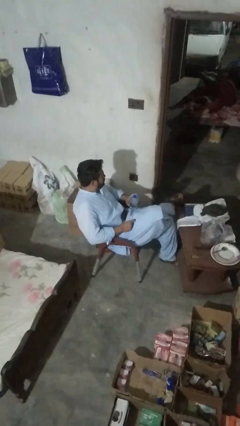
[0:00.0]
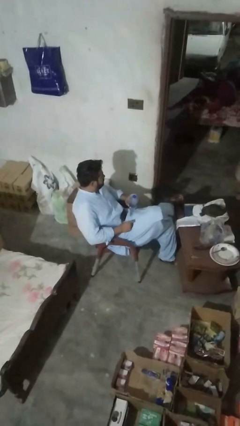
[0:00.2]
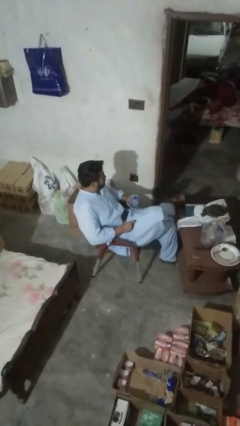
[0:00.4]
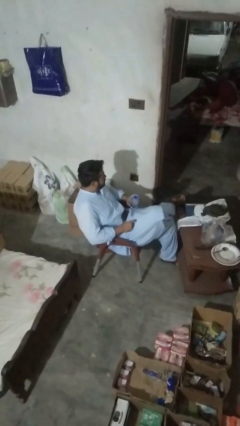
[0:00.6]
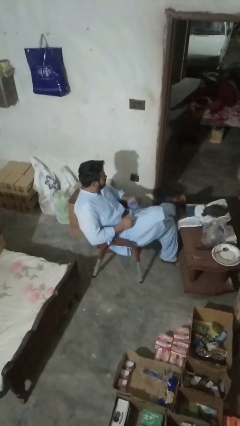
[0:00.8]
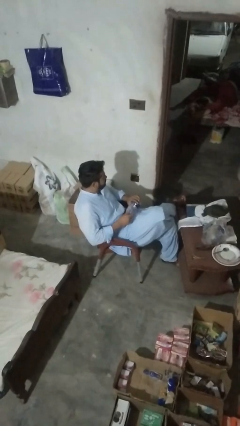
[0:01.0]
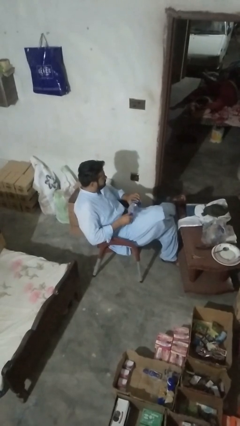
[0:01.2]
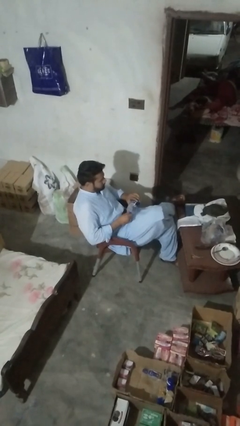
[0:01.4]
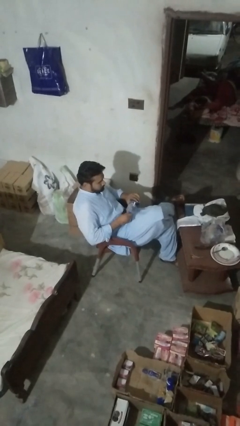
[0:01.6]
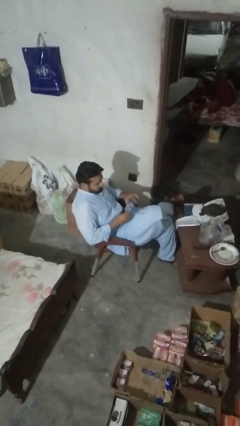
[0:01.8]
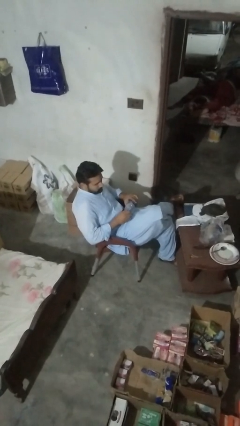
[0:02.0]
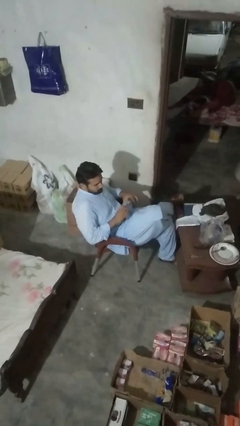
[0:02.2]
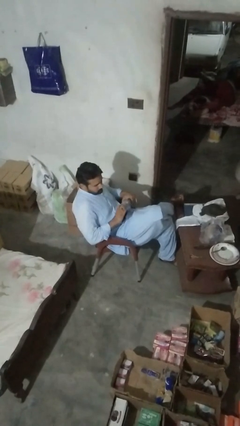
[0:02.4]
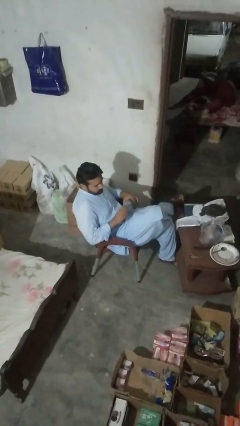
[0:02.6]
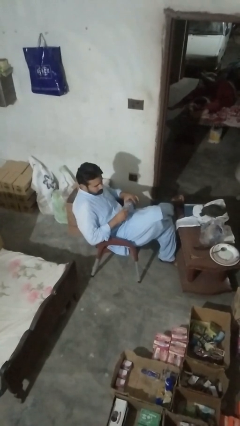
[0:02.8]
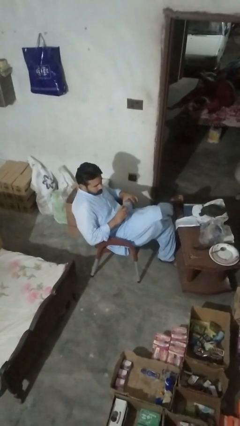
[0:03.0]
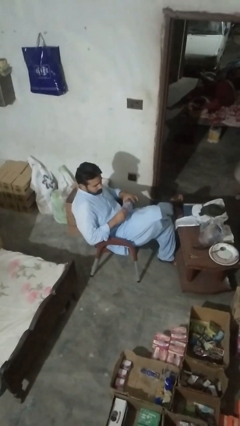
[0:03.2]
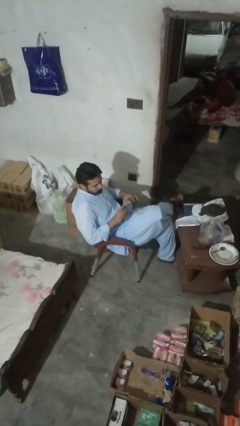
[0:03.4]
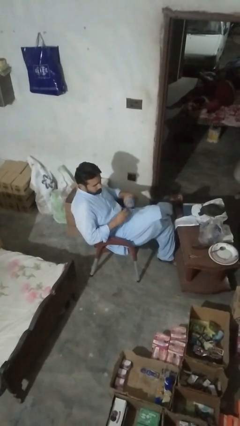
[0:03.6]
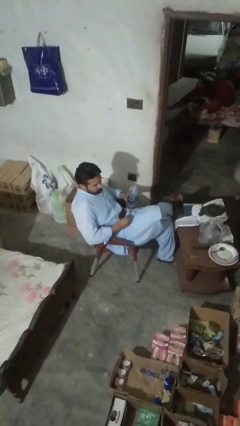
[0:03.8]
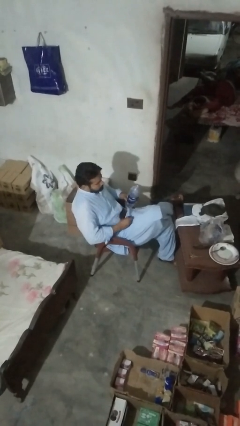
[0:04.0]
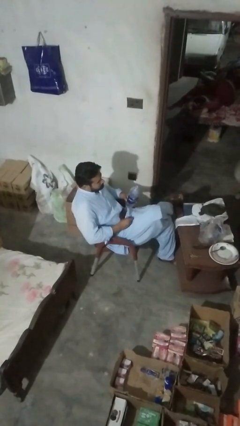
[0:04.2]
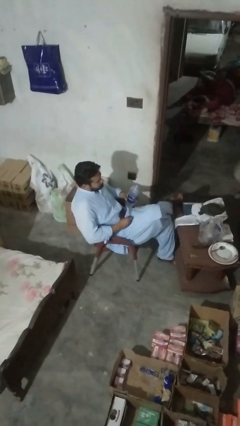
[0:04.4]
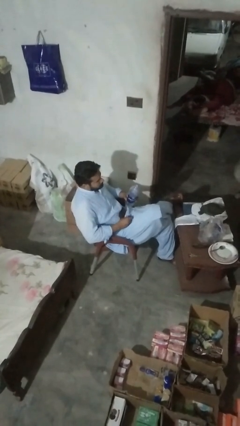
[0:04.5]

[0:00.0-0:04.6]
person unscrews lid from bottle

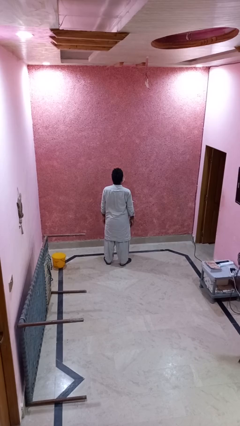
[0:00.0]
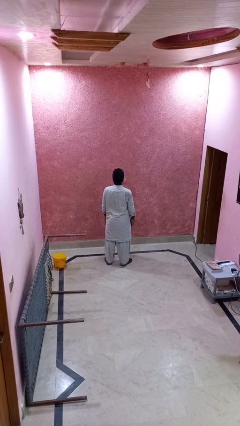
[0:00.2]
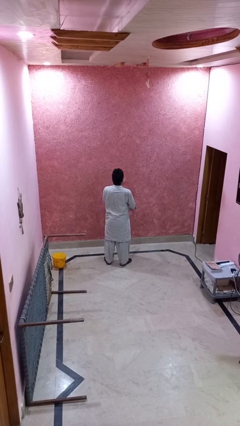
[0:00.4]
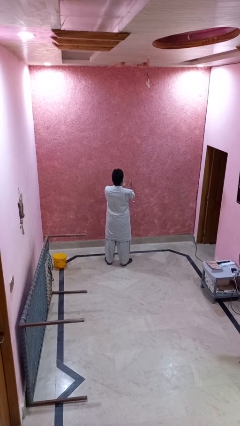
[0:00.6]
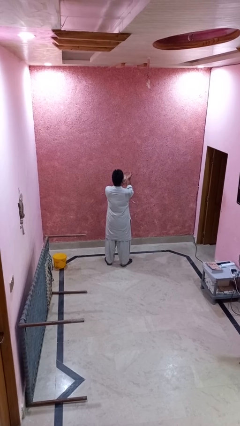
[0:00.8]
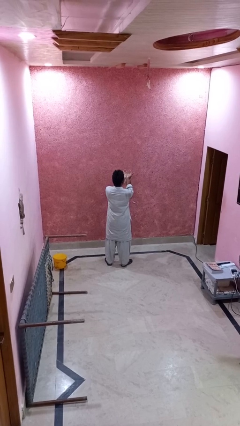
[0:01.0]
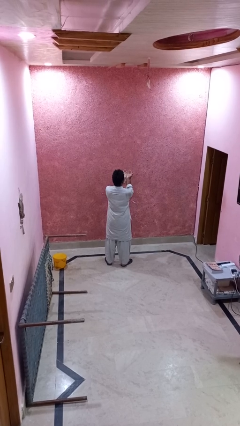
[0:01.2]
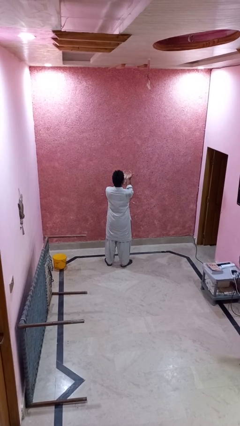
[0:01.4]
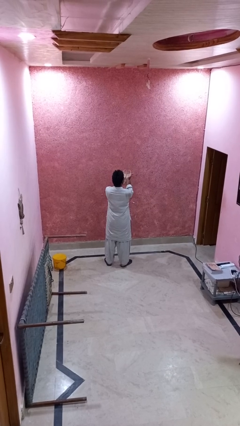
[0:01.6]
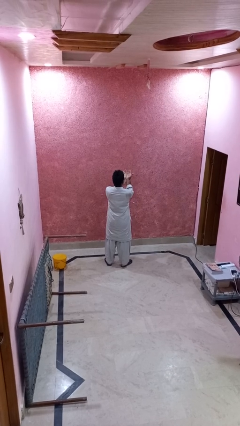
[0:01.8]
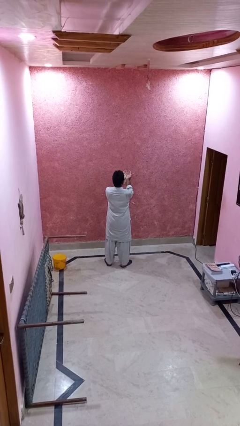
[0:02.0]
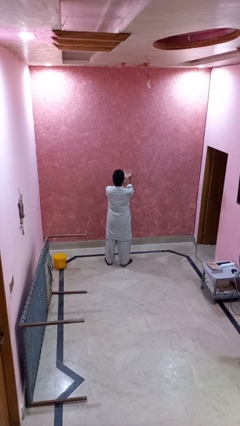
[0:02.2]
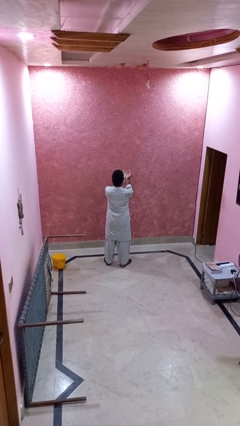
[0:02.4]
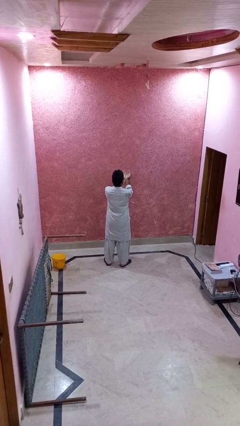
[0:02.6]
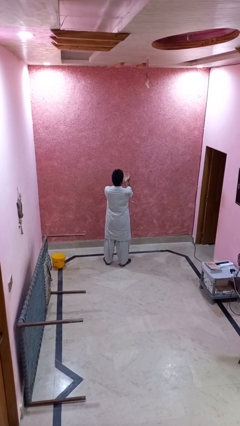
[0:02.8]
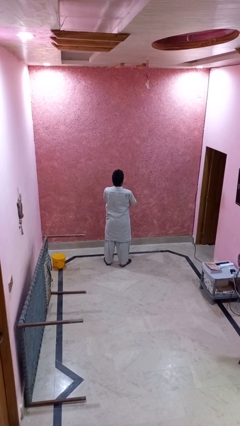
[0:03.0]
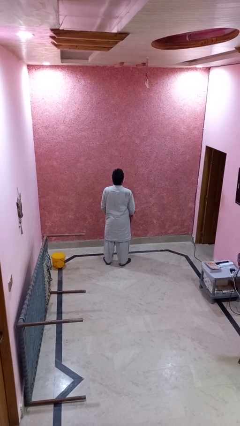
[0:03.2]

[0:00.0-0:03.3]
person prays

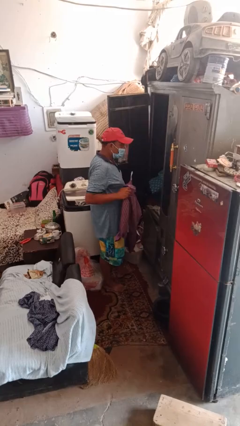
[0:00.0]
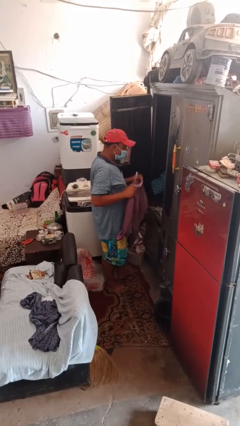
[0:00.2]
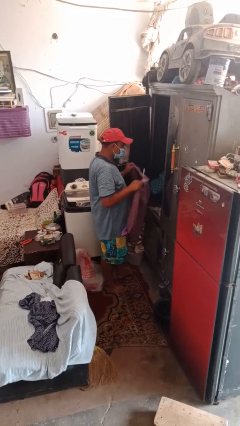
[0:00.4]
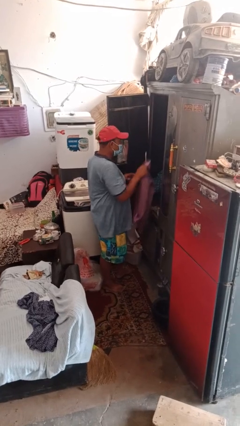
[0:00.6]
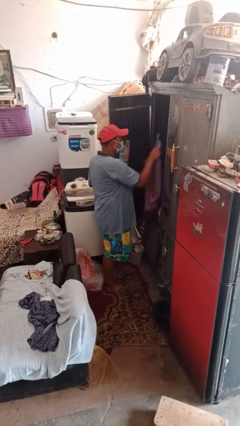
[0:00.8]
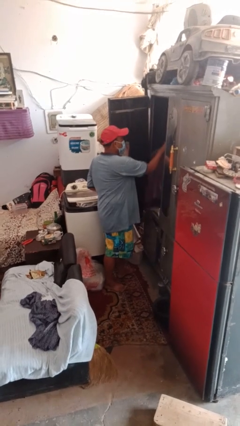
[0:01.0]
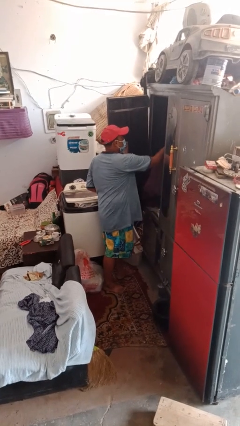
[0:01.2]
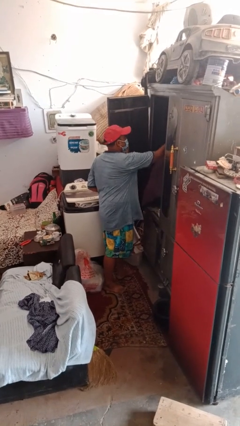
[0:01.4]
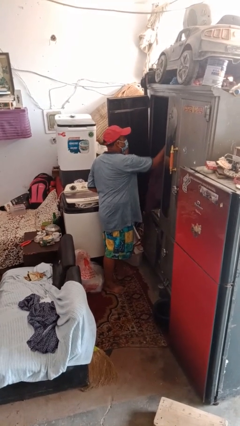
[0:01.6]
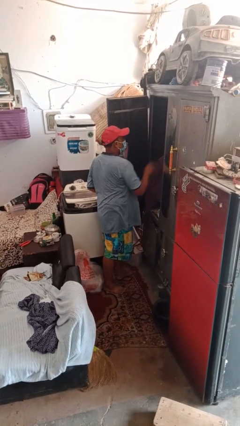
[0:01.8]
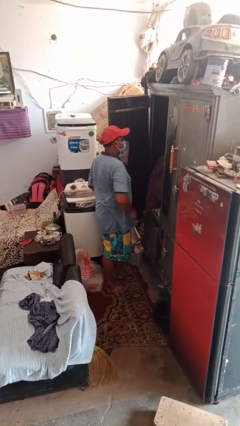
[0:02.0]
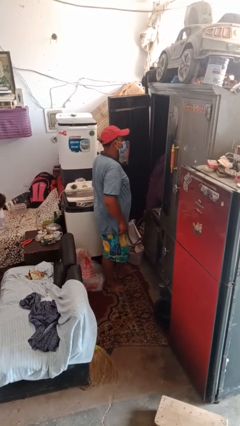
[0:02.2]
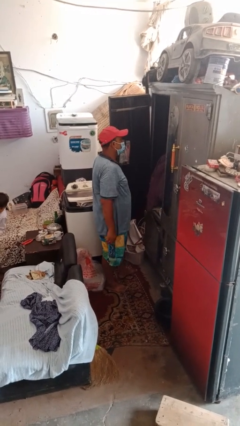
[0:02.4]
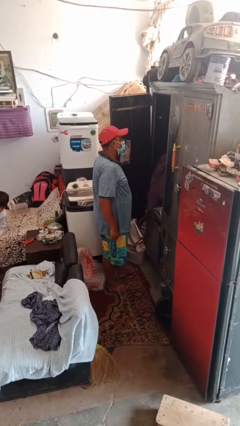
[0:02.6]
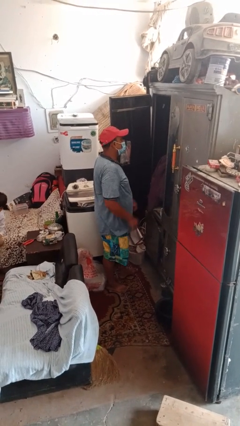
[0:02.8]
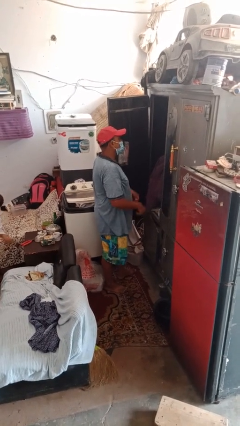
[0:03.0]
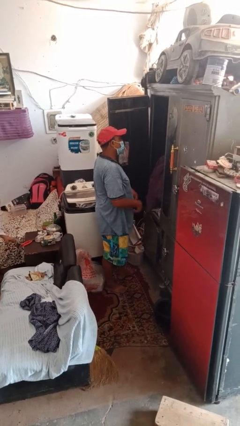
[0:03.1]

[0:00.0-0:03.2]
person puts clothes into closet

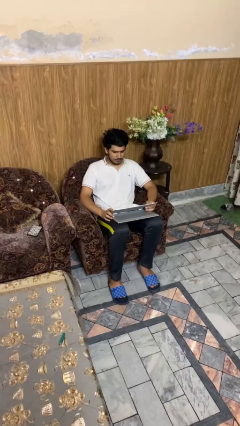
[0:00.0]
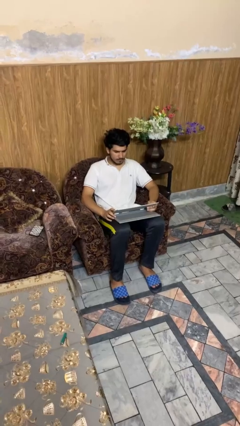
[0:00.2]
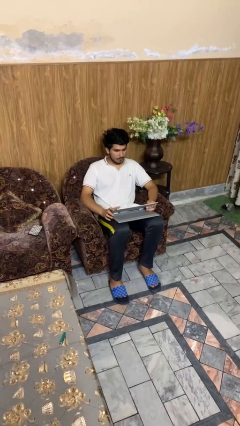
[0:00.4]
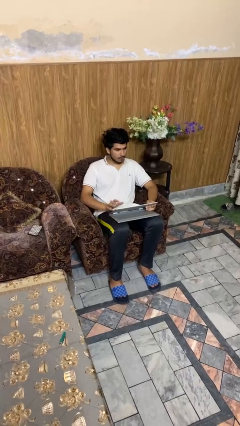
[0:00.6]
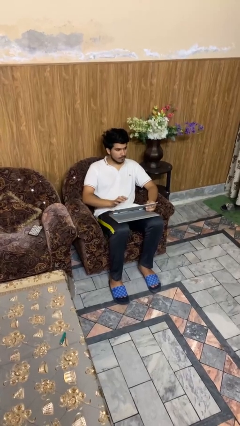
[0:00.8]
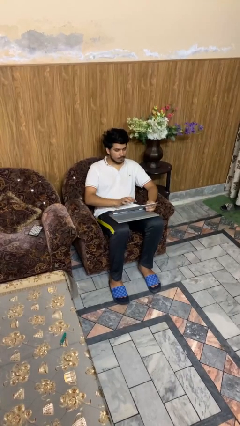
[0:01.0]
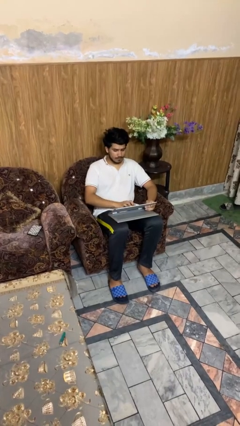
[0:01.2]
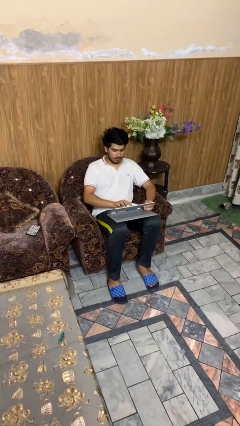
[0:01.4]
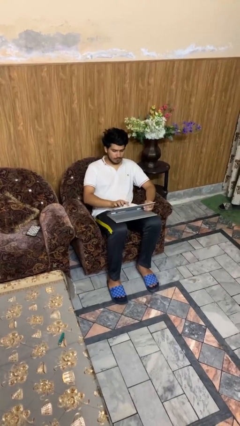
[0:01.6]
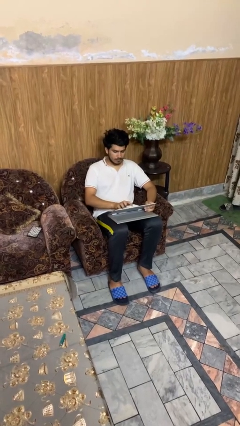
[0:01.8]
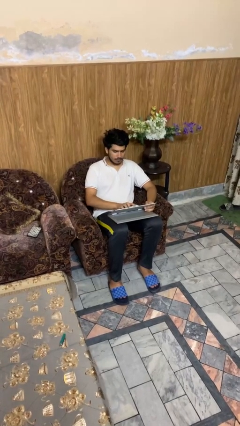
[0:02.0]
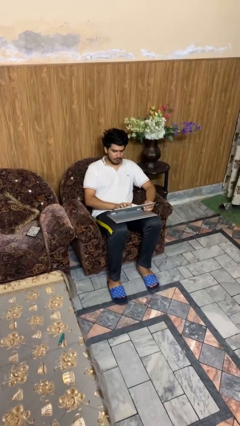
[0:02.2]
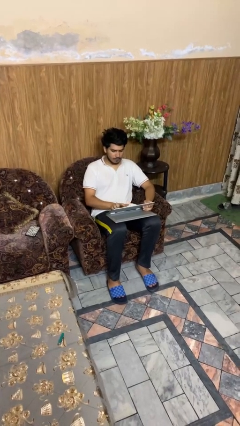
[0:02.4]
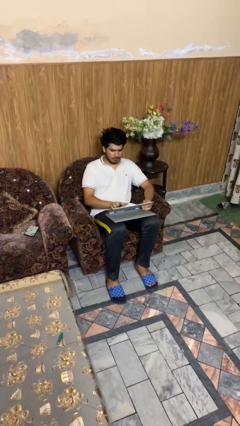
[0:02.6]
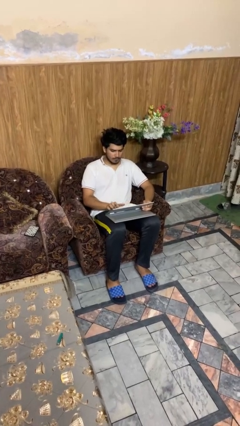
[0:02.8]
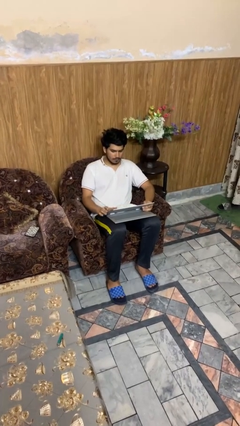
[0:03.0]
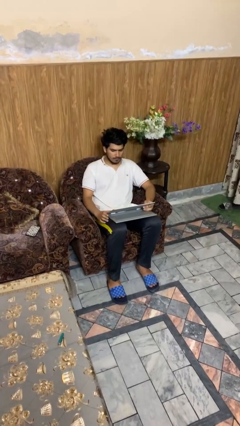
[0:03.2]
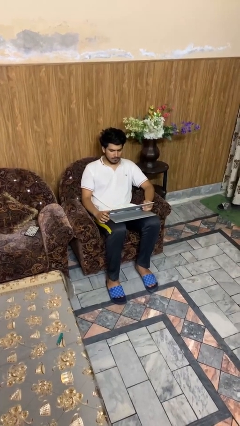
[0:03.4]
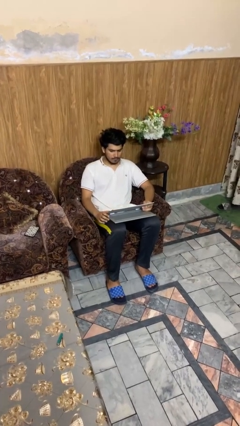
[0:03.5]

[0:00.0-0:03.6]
person interacts with tablet

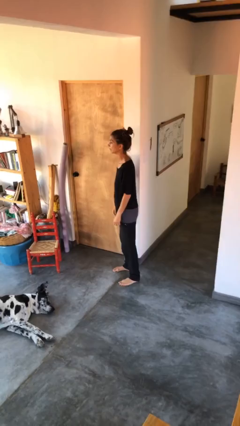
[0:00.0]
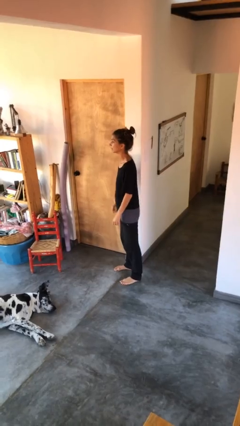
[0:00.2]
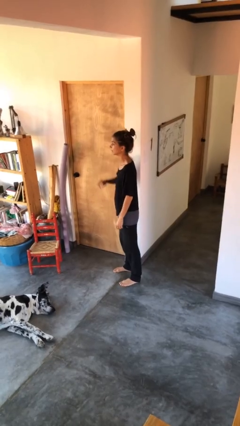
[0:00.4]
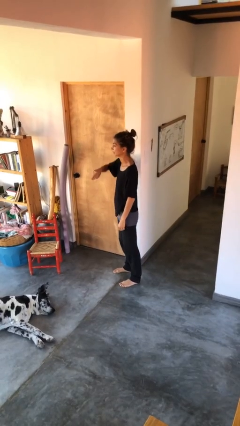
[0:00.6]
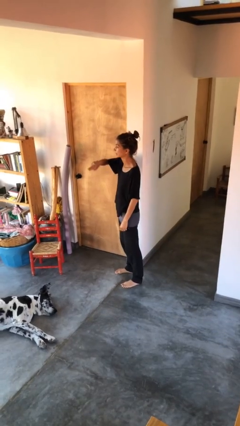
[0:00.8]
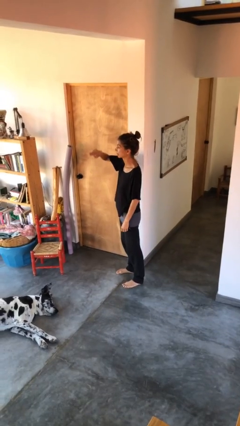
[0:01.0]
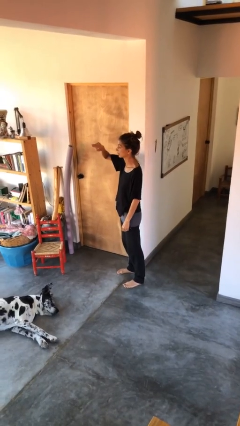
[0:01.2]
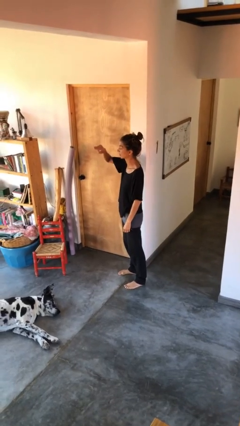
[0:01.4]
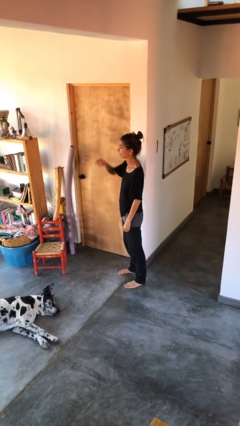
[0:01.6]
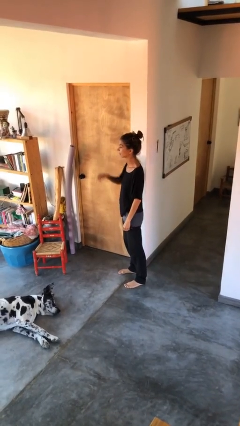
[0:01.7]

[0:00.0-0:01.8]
person gestures swipe up

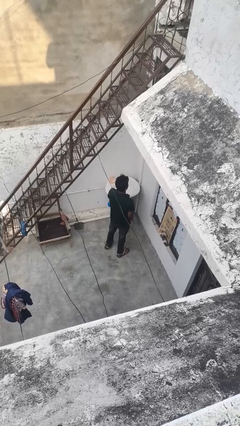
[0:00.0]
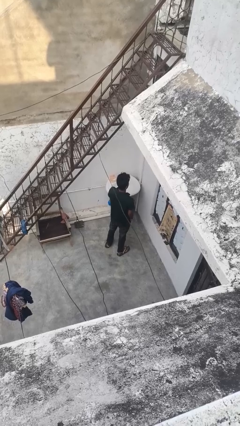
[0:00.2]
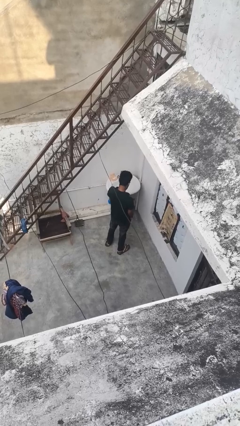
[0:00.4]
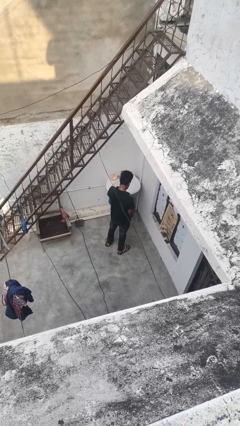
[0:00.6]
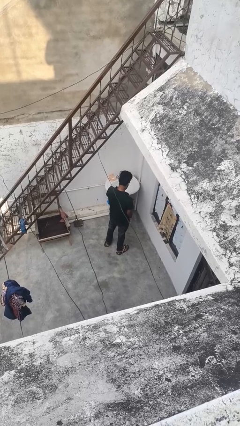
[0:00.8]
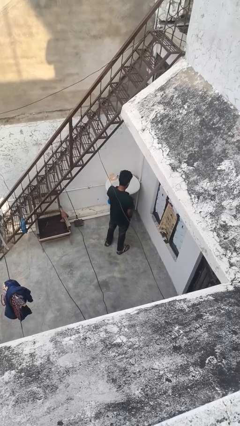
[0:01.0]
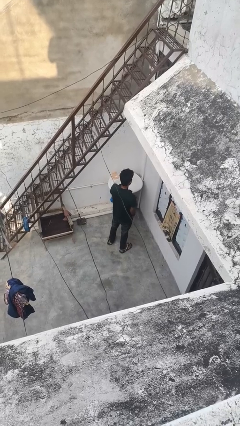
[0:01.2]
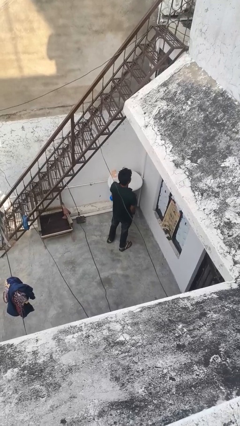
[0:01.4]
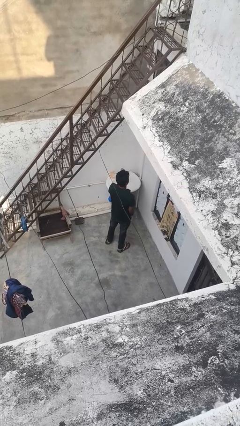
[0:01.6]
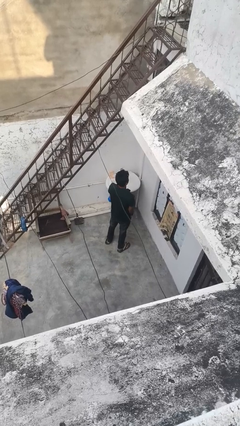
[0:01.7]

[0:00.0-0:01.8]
person strokes chin
